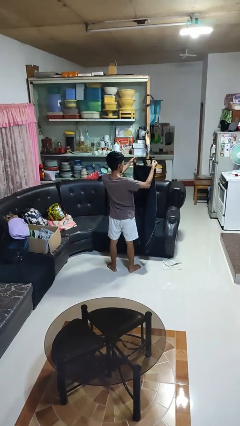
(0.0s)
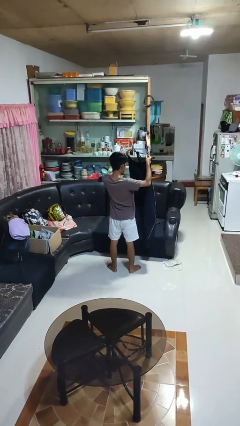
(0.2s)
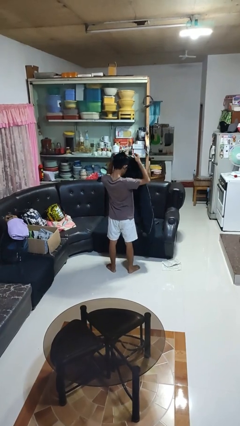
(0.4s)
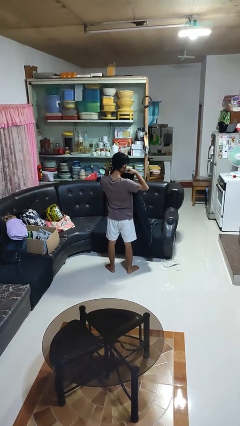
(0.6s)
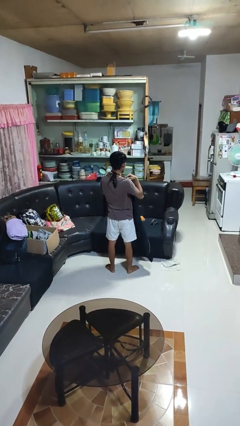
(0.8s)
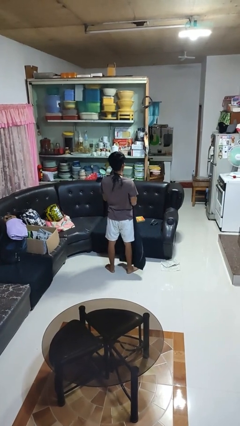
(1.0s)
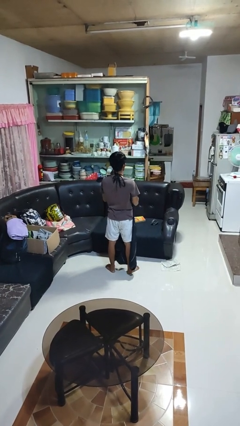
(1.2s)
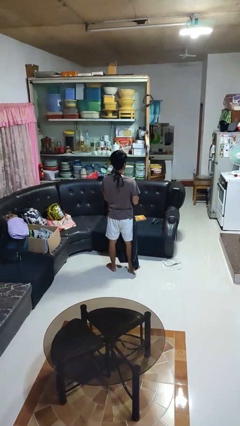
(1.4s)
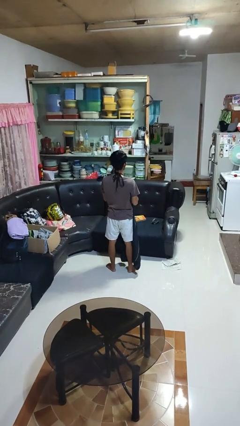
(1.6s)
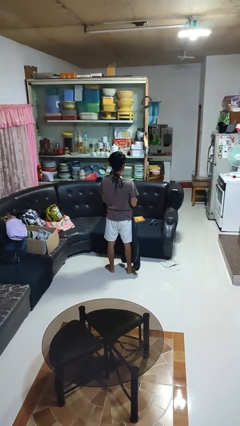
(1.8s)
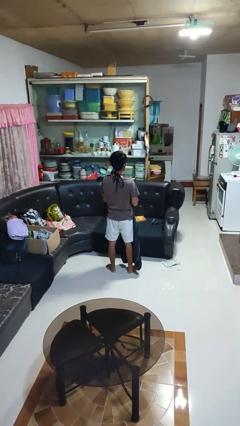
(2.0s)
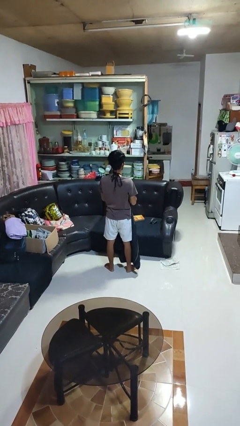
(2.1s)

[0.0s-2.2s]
person puts on apron

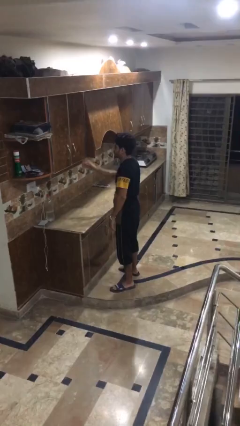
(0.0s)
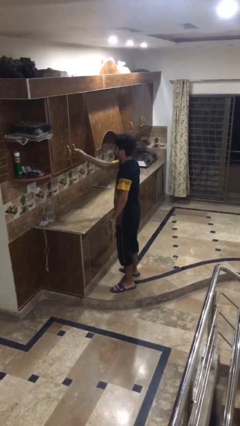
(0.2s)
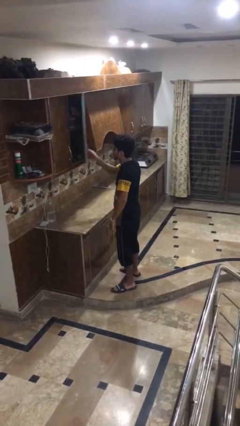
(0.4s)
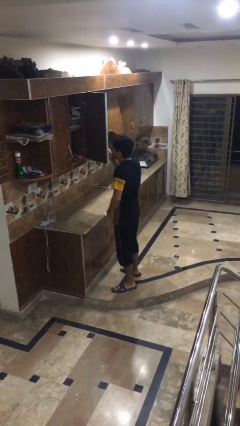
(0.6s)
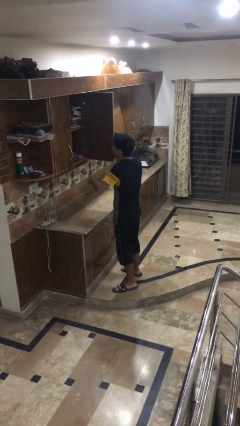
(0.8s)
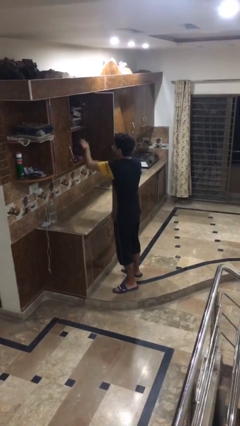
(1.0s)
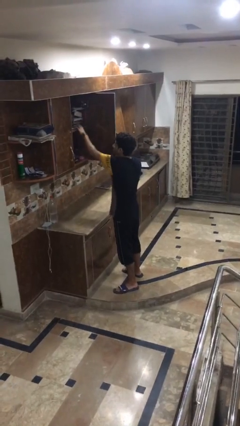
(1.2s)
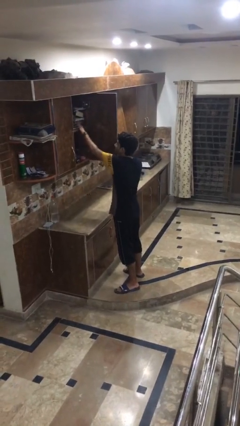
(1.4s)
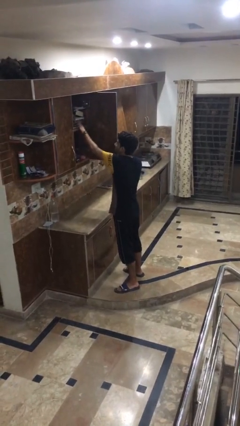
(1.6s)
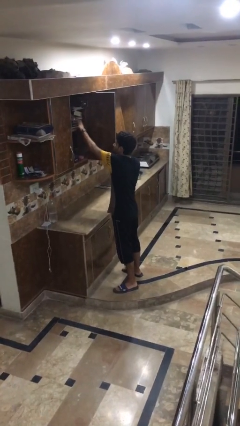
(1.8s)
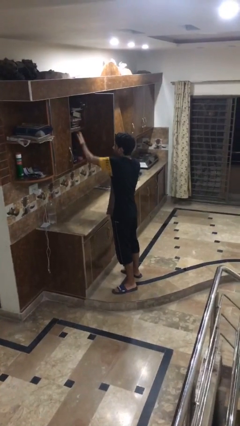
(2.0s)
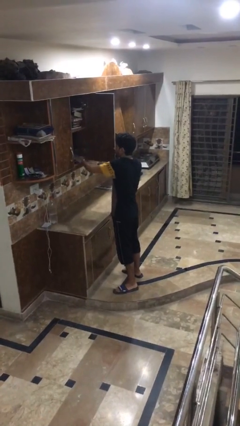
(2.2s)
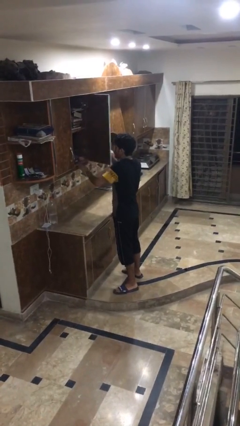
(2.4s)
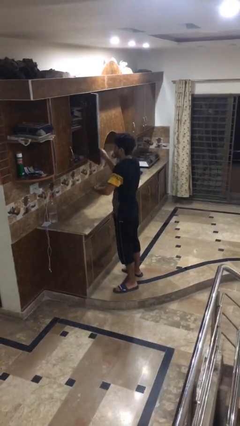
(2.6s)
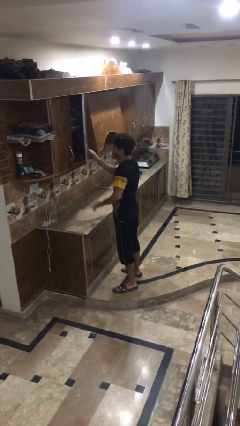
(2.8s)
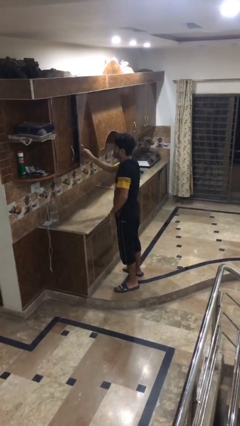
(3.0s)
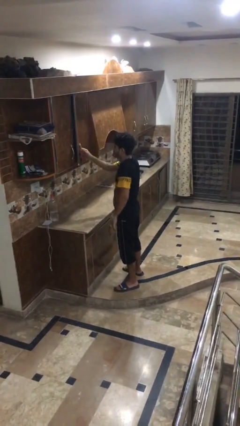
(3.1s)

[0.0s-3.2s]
person searches in cabinet

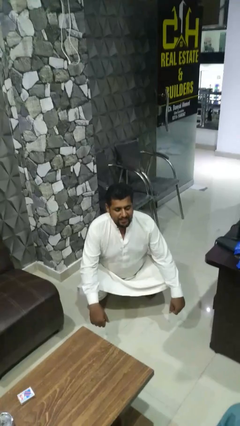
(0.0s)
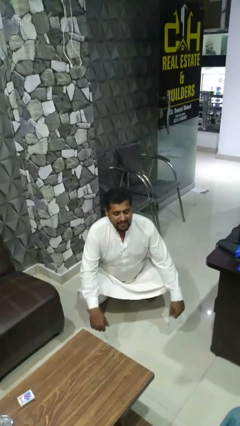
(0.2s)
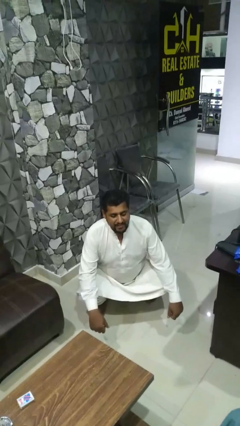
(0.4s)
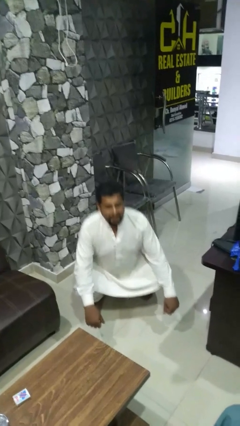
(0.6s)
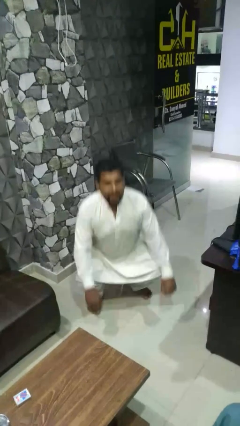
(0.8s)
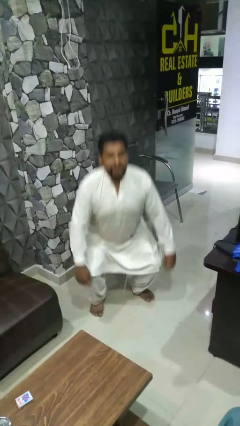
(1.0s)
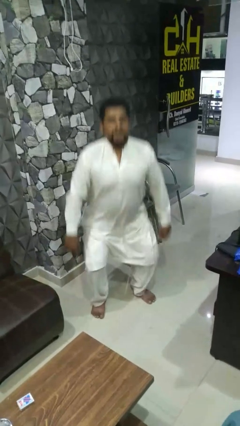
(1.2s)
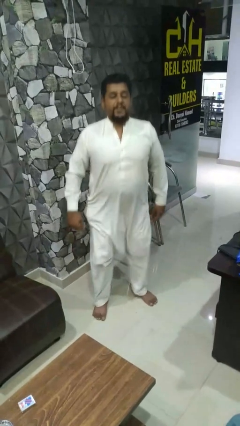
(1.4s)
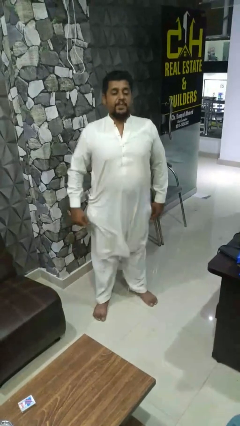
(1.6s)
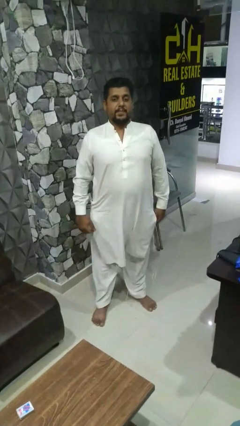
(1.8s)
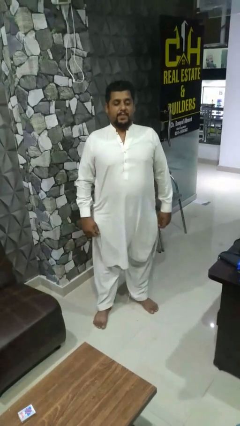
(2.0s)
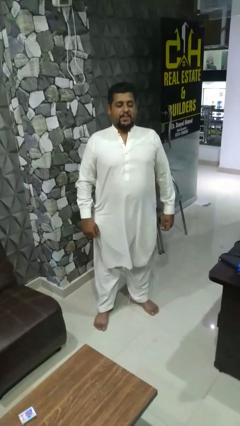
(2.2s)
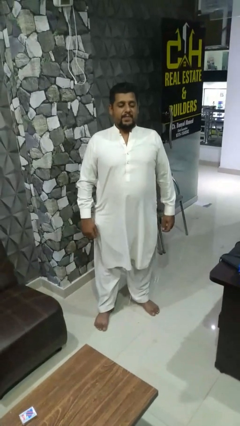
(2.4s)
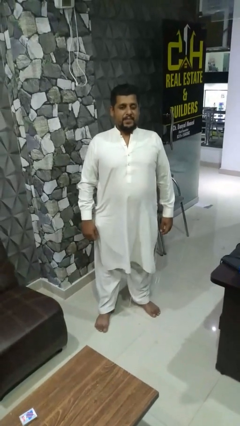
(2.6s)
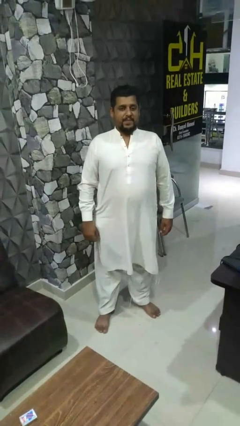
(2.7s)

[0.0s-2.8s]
person stands up

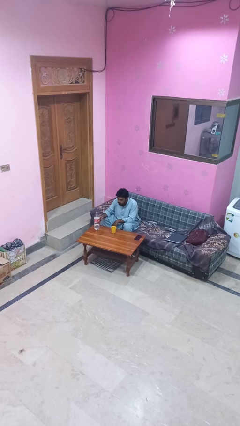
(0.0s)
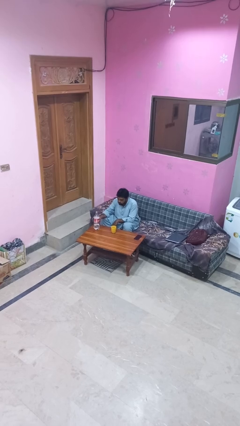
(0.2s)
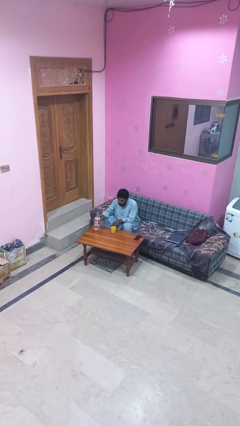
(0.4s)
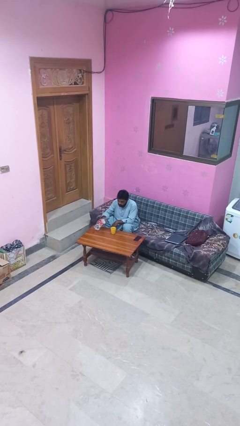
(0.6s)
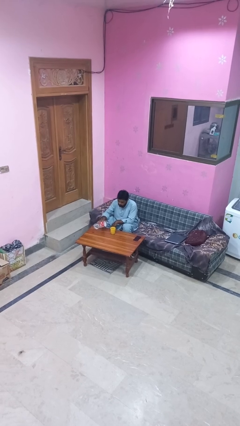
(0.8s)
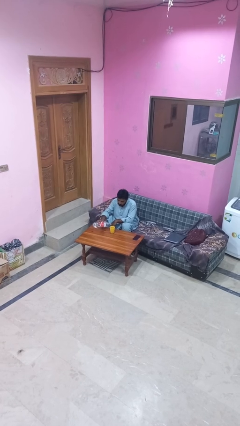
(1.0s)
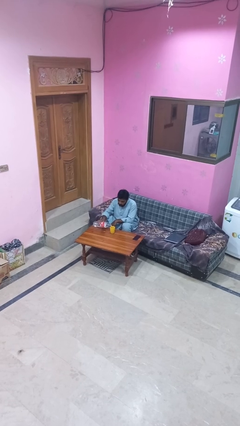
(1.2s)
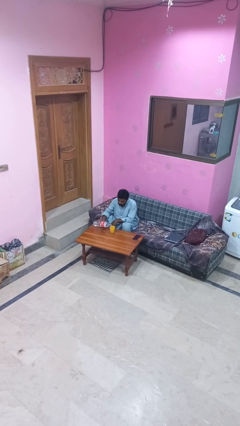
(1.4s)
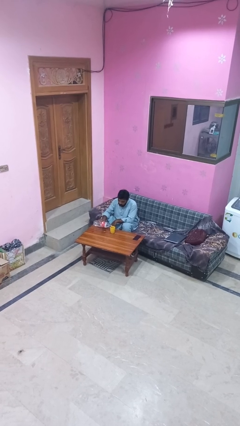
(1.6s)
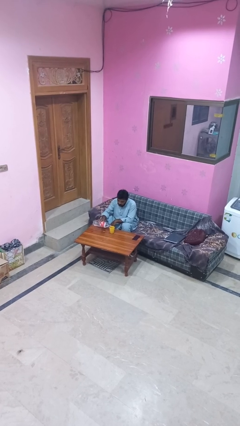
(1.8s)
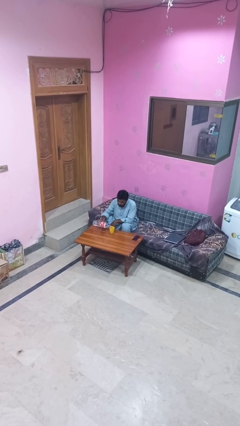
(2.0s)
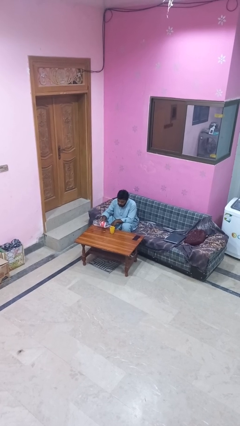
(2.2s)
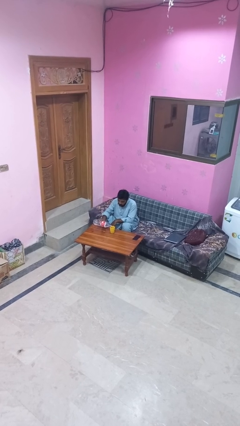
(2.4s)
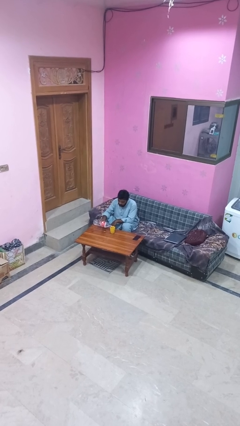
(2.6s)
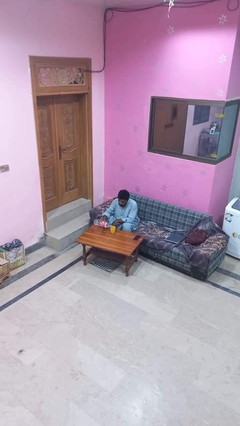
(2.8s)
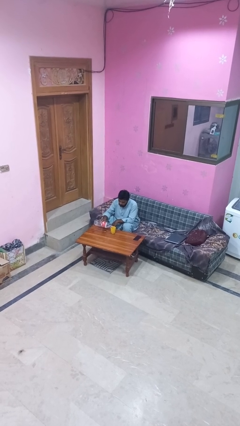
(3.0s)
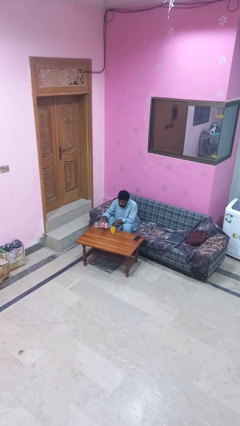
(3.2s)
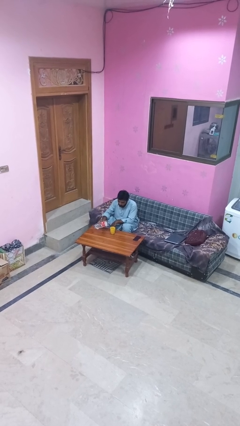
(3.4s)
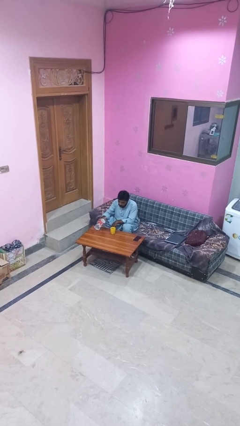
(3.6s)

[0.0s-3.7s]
person pours liquid into cup

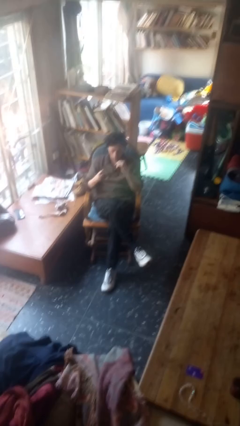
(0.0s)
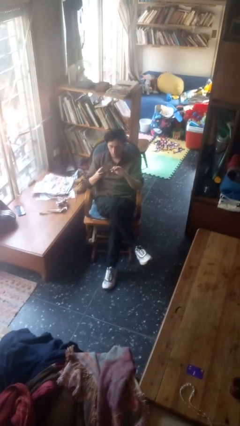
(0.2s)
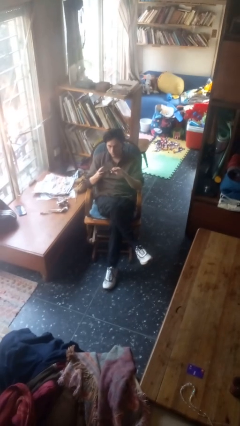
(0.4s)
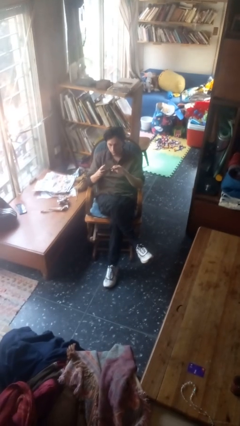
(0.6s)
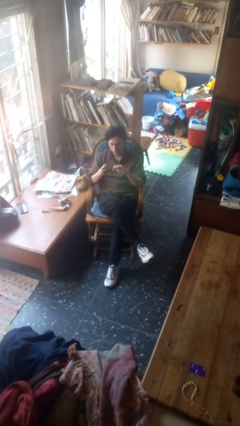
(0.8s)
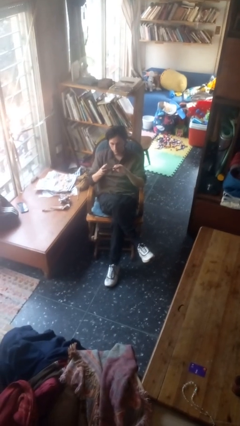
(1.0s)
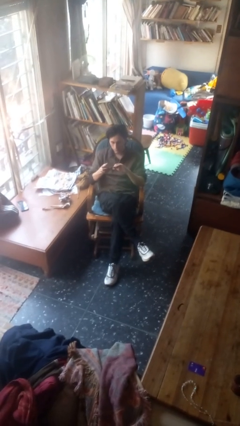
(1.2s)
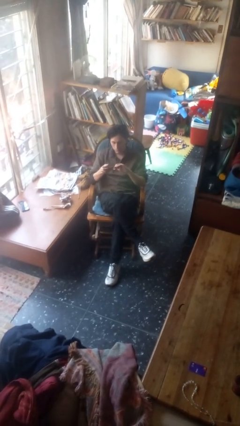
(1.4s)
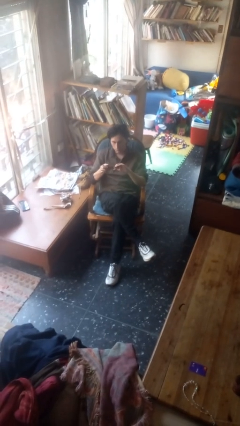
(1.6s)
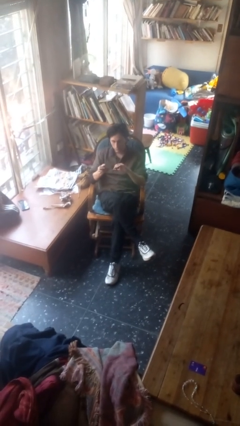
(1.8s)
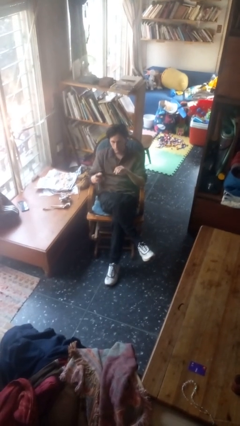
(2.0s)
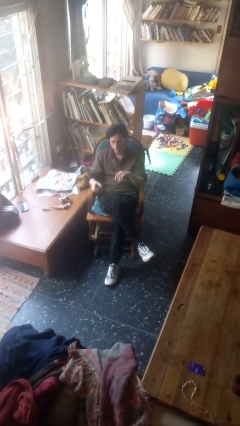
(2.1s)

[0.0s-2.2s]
person clips fingernails

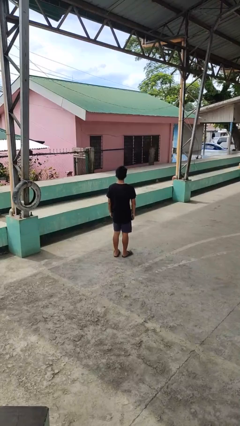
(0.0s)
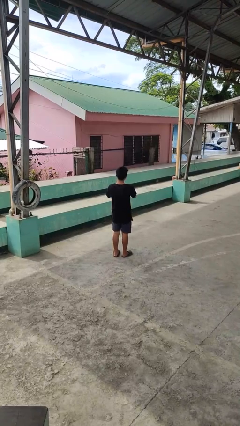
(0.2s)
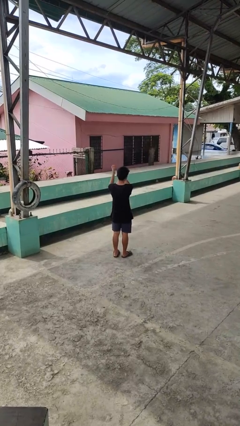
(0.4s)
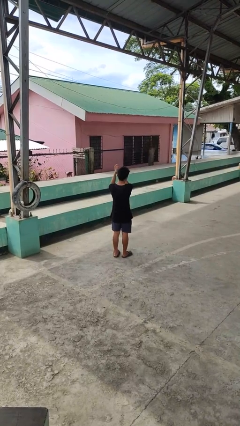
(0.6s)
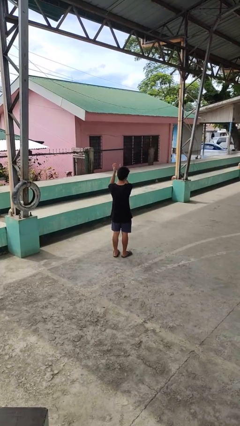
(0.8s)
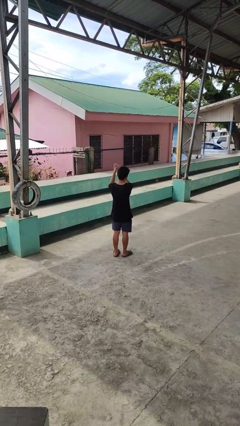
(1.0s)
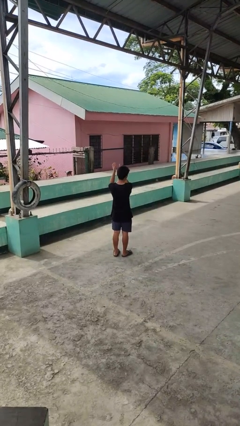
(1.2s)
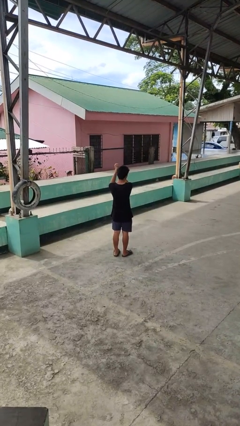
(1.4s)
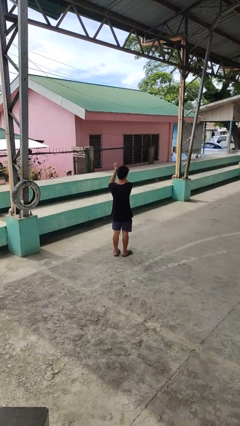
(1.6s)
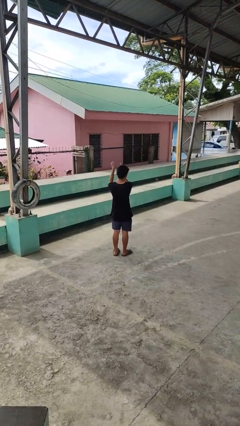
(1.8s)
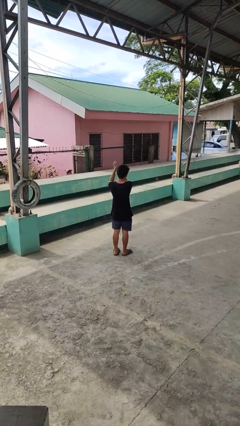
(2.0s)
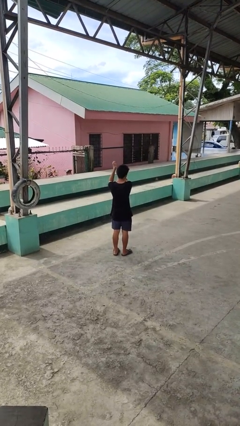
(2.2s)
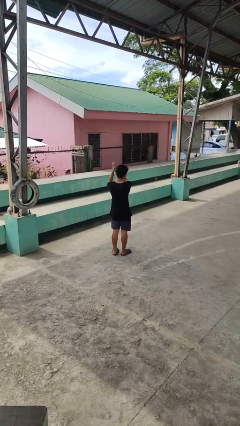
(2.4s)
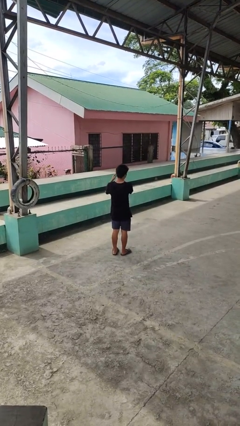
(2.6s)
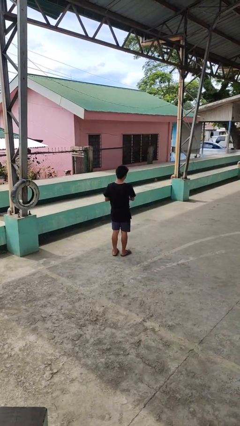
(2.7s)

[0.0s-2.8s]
person claps hands

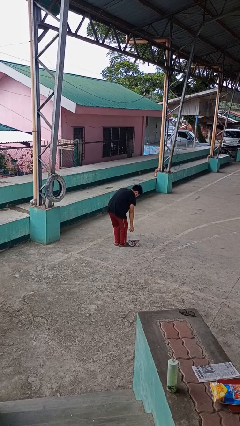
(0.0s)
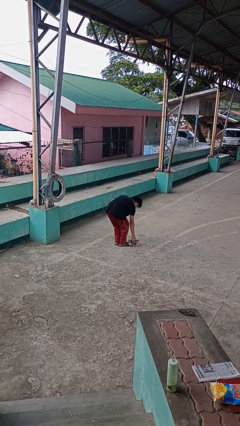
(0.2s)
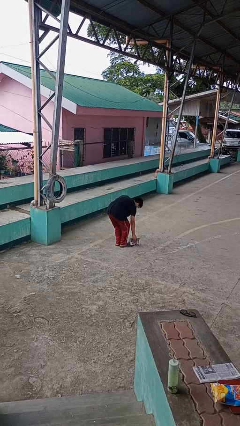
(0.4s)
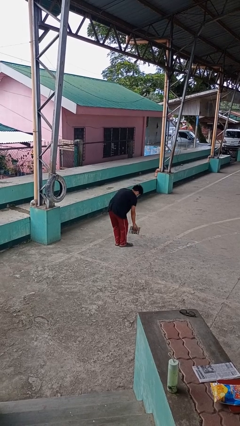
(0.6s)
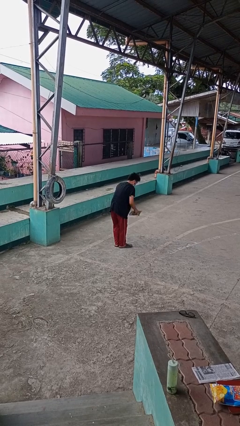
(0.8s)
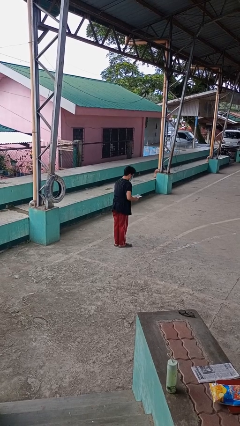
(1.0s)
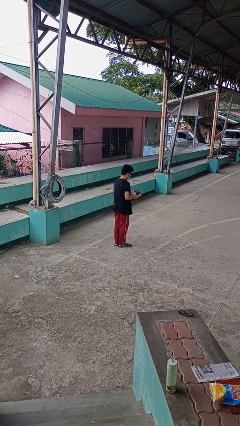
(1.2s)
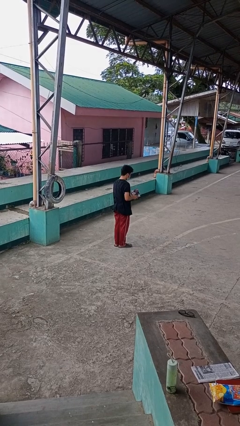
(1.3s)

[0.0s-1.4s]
person picks up object from floor
